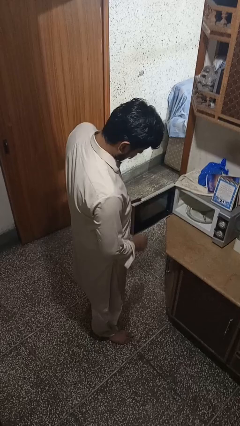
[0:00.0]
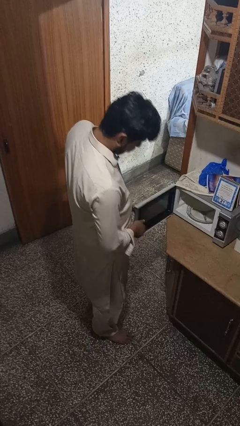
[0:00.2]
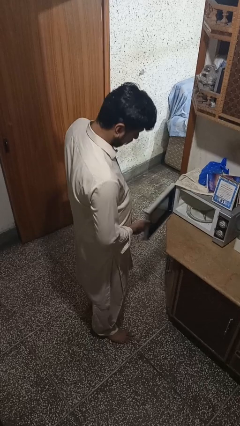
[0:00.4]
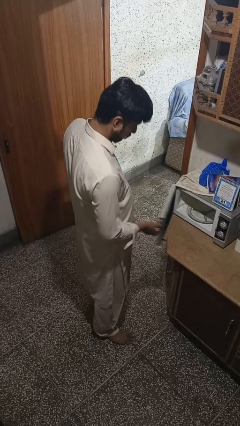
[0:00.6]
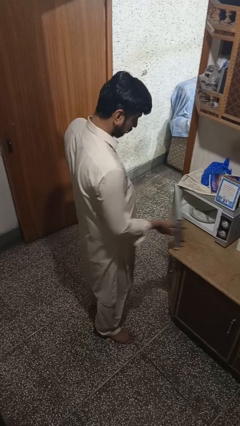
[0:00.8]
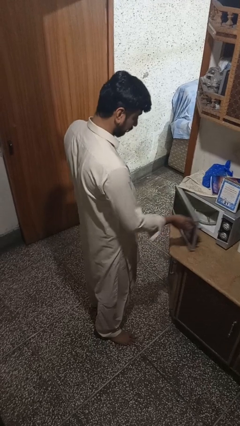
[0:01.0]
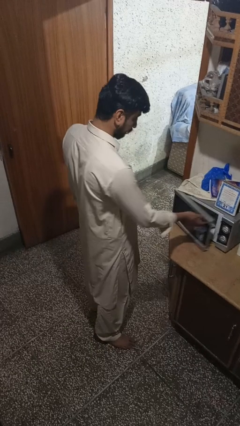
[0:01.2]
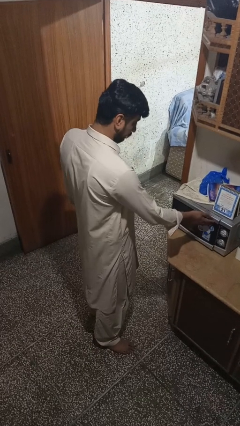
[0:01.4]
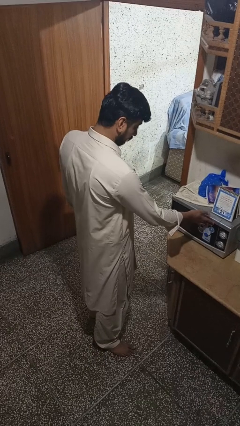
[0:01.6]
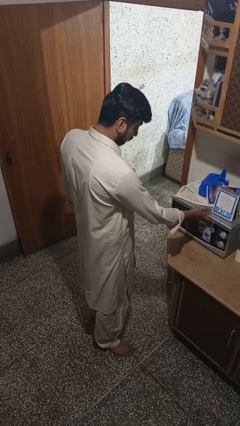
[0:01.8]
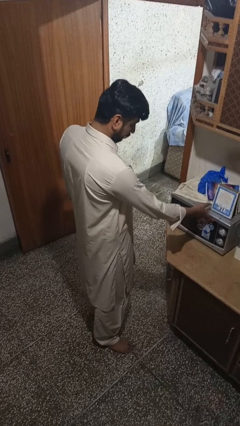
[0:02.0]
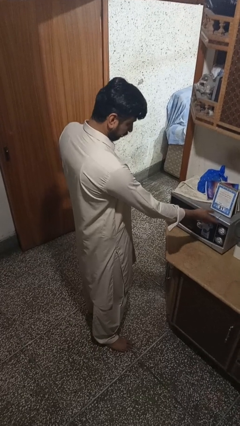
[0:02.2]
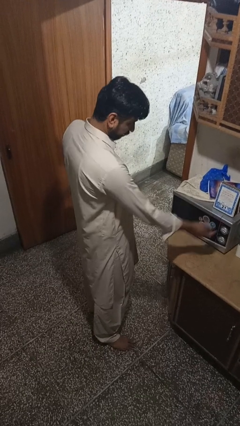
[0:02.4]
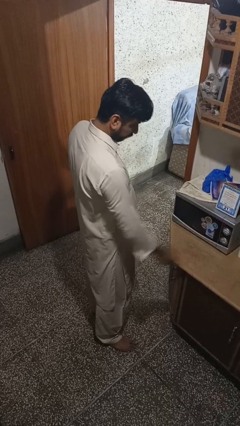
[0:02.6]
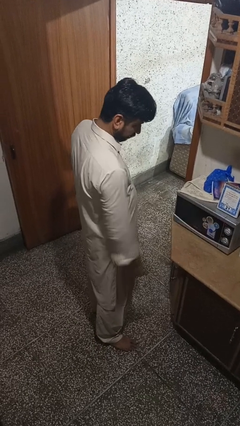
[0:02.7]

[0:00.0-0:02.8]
person closes oven door

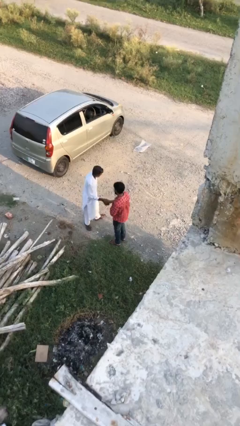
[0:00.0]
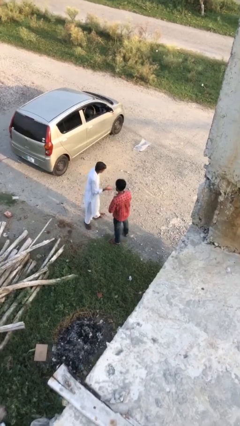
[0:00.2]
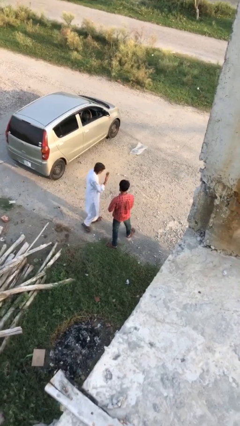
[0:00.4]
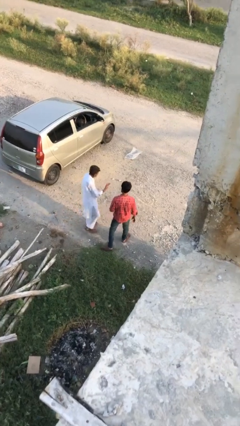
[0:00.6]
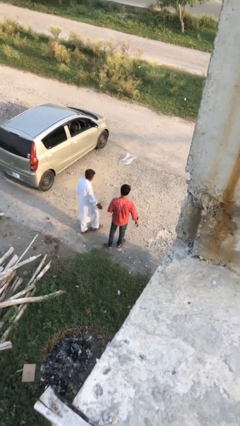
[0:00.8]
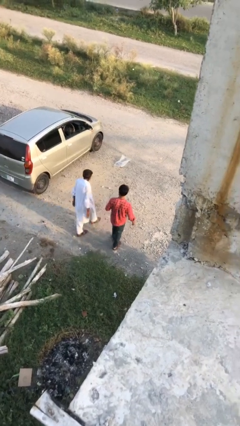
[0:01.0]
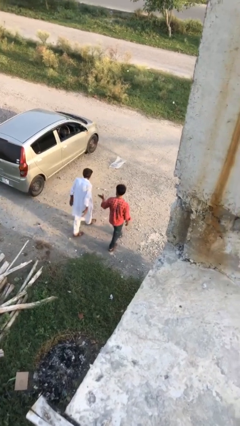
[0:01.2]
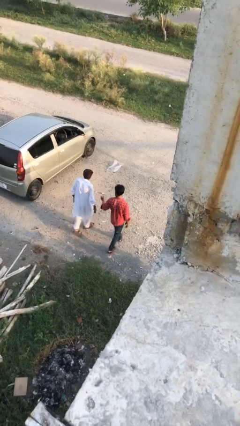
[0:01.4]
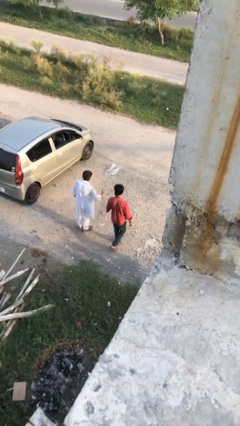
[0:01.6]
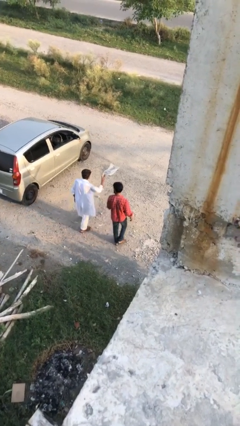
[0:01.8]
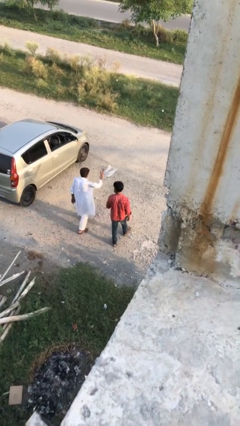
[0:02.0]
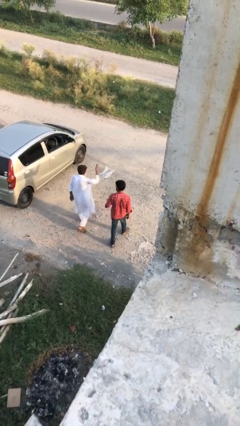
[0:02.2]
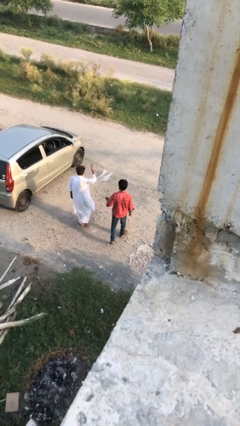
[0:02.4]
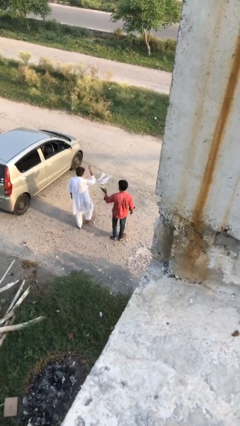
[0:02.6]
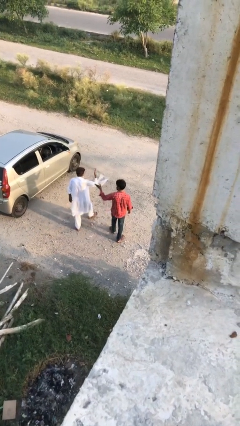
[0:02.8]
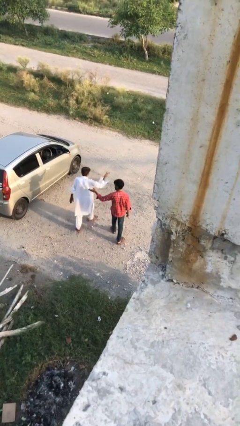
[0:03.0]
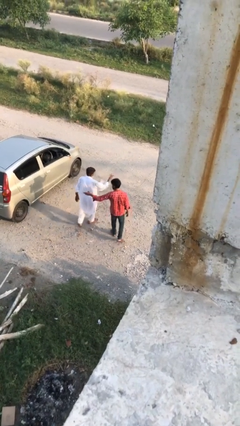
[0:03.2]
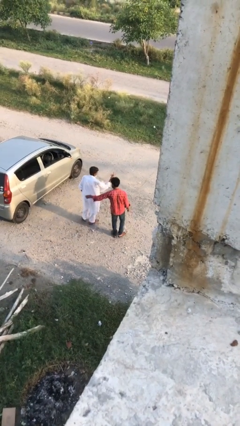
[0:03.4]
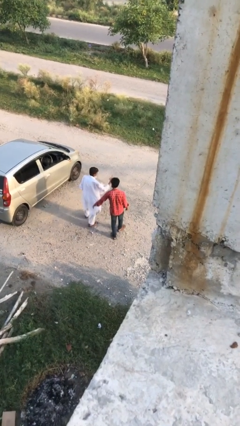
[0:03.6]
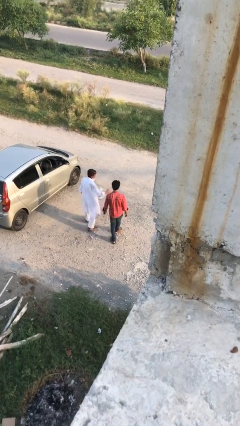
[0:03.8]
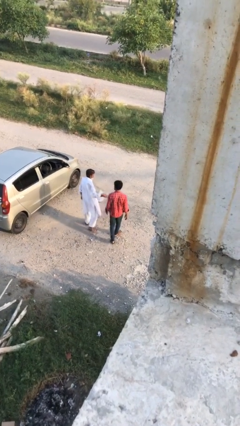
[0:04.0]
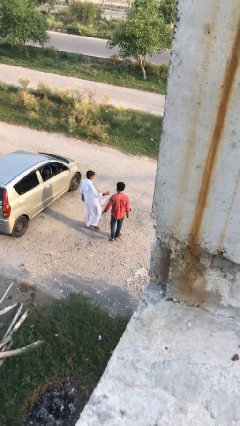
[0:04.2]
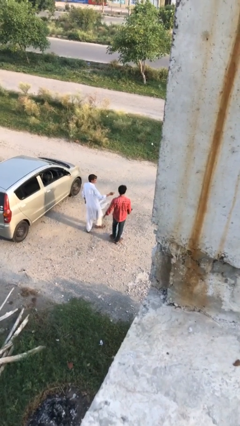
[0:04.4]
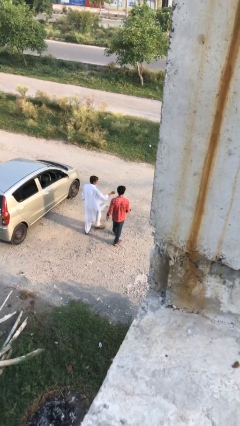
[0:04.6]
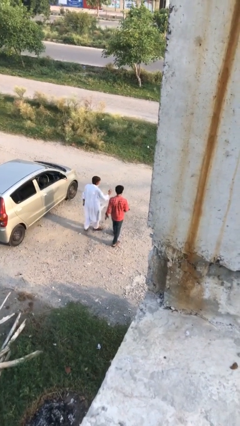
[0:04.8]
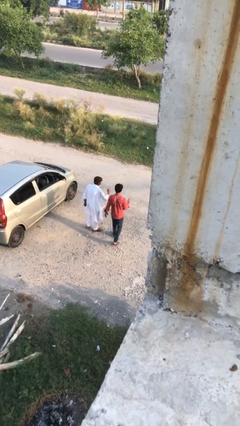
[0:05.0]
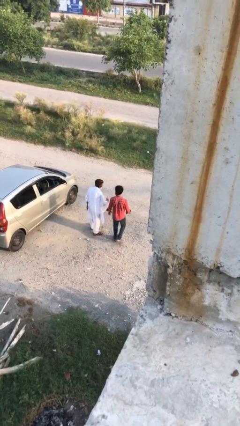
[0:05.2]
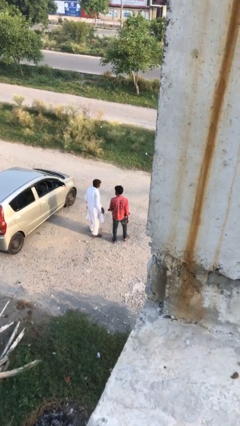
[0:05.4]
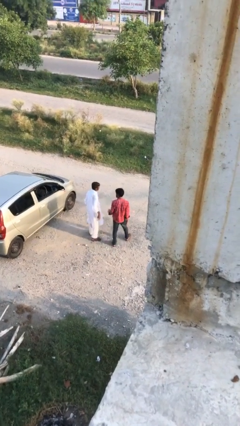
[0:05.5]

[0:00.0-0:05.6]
person talks to person

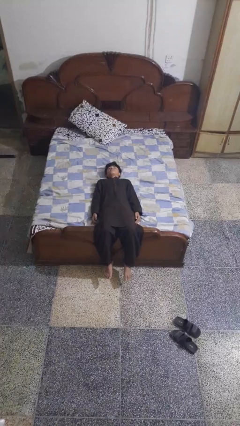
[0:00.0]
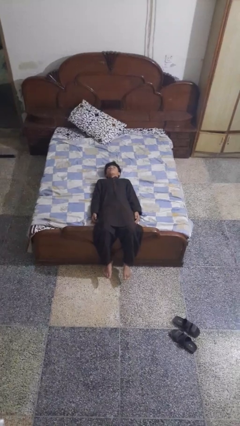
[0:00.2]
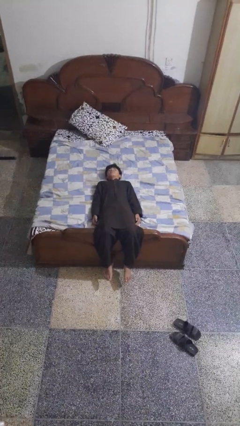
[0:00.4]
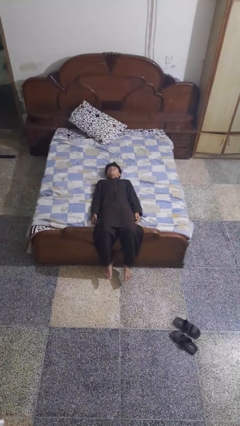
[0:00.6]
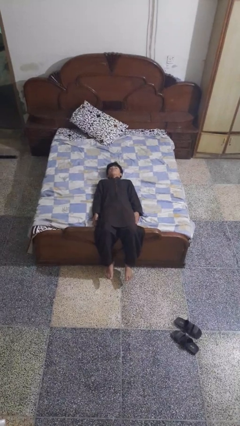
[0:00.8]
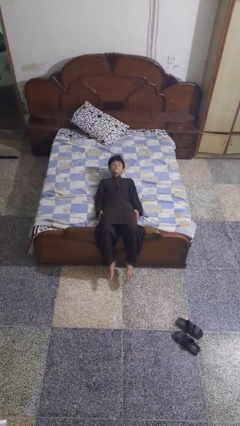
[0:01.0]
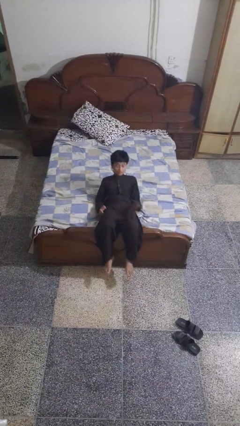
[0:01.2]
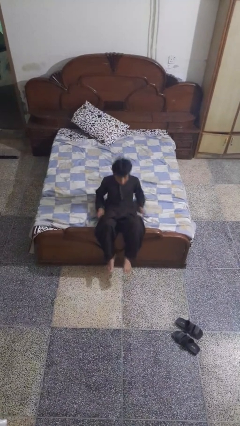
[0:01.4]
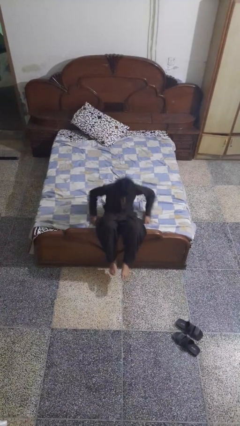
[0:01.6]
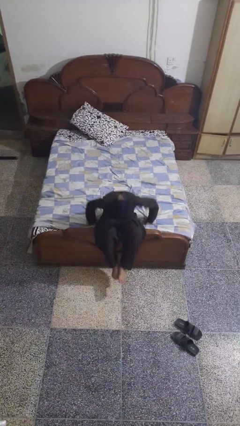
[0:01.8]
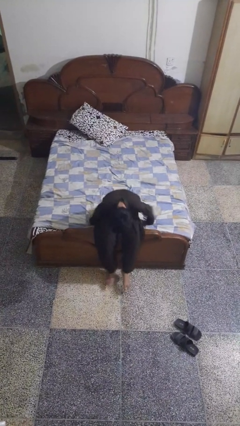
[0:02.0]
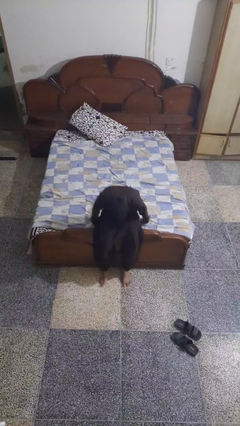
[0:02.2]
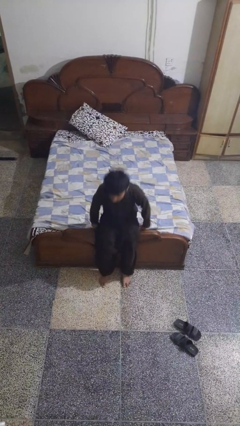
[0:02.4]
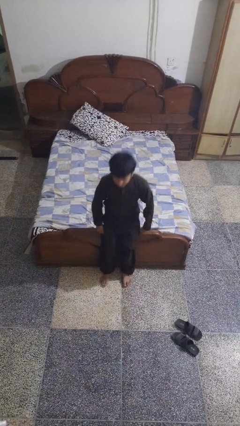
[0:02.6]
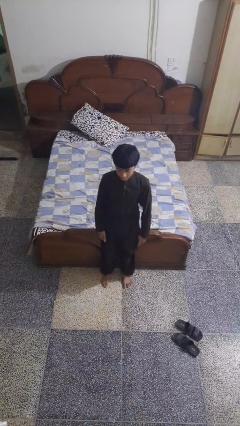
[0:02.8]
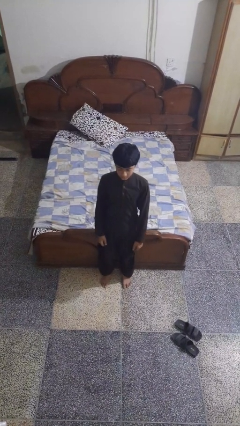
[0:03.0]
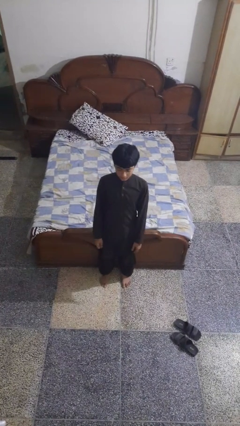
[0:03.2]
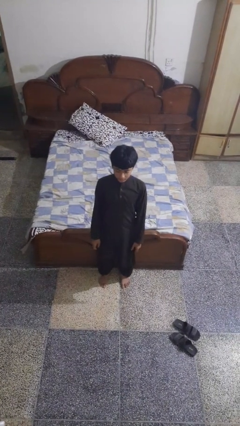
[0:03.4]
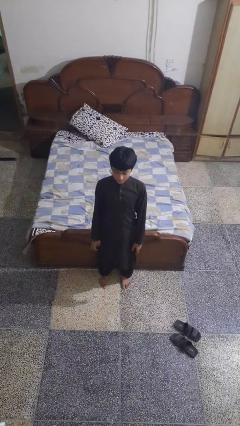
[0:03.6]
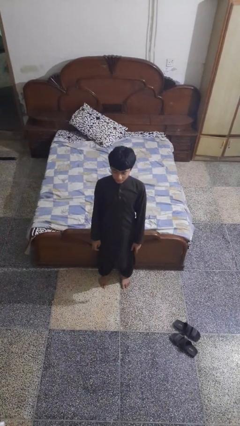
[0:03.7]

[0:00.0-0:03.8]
person stands up

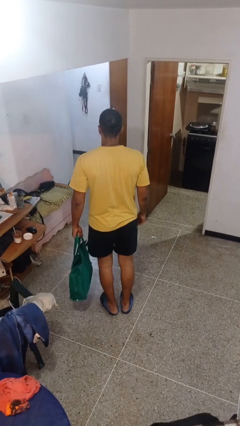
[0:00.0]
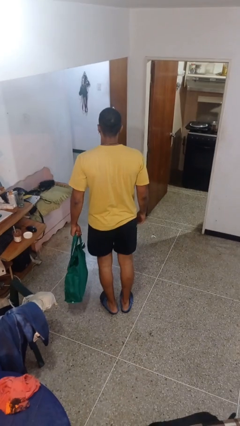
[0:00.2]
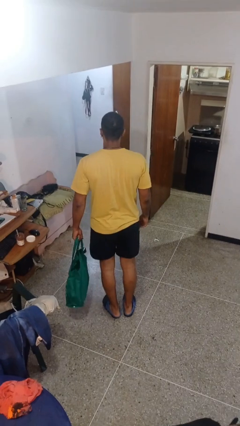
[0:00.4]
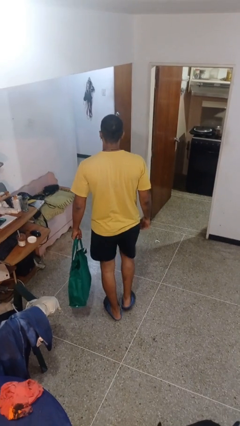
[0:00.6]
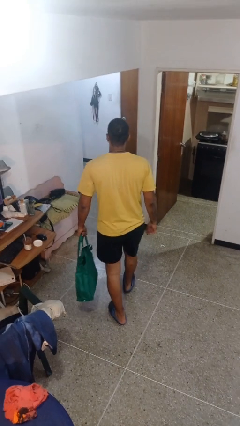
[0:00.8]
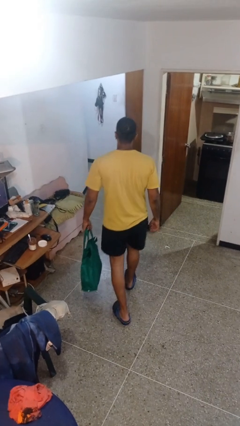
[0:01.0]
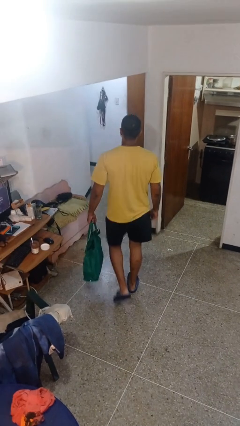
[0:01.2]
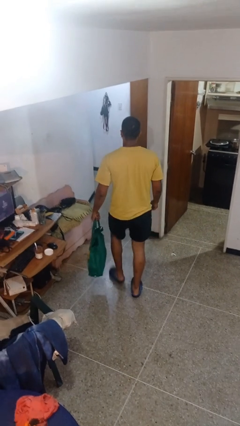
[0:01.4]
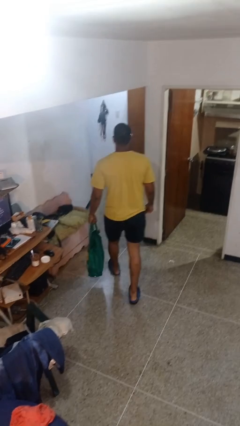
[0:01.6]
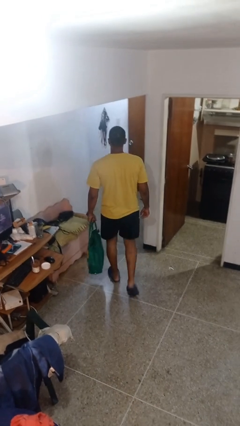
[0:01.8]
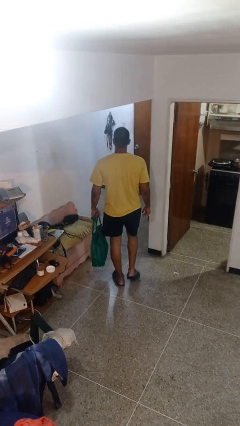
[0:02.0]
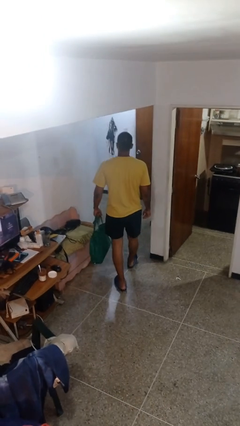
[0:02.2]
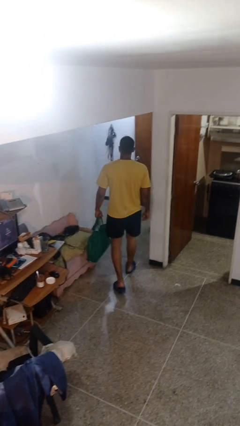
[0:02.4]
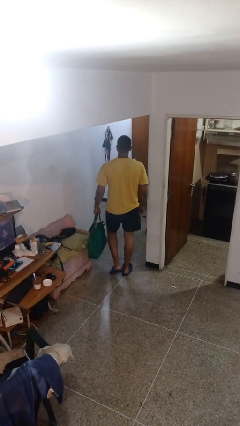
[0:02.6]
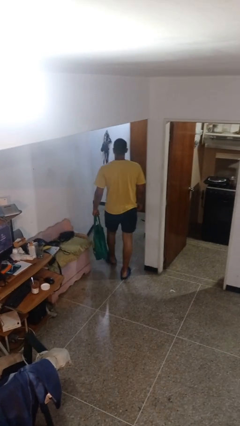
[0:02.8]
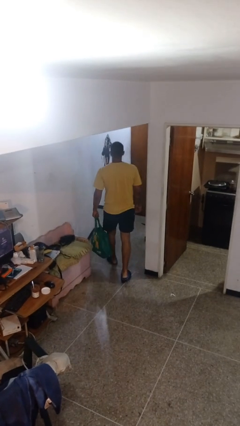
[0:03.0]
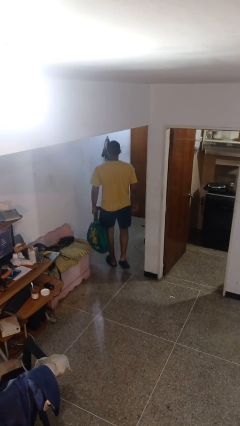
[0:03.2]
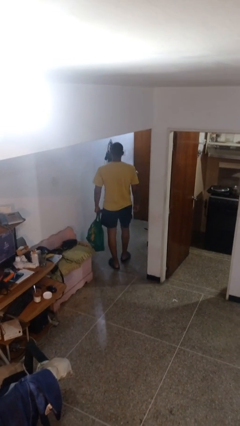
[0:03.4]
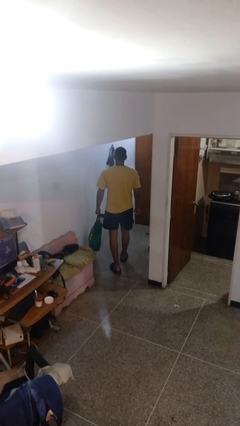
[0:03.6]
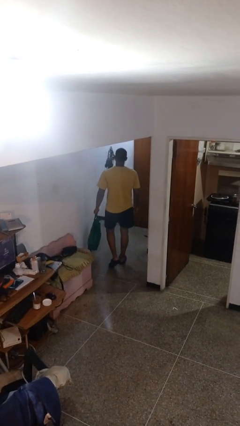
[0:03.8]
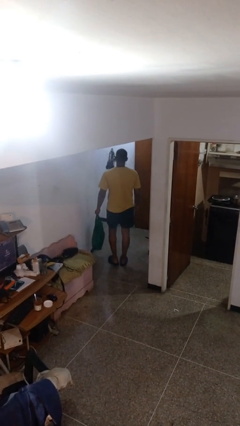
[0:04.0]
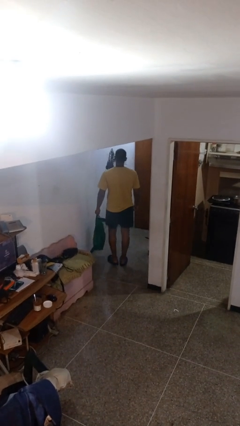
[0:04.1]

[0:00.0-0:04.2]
person carries groceries

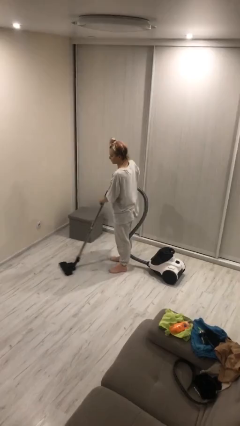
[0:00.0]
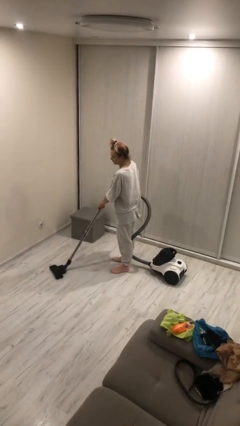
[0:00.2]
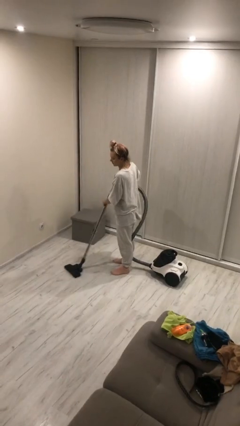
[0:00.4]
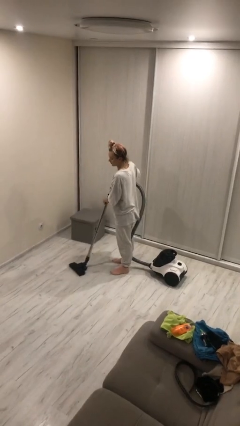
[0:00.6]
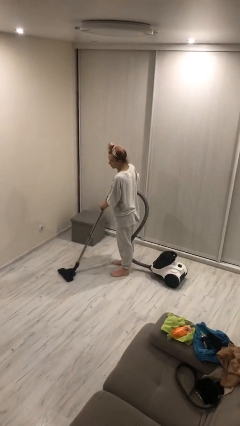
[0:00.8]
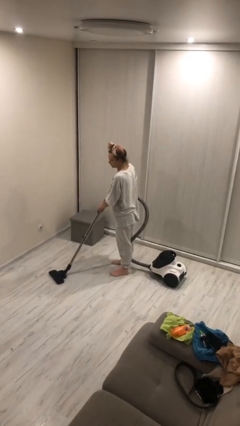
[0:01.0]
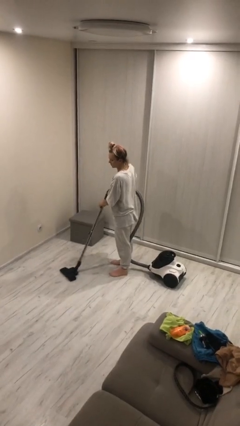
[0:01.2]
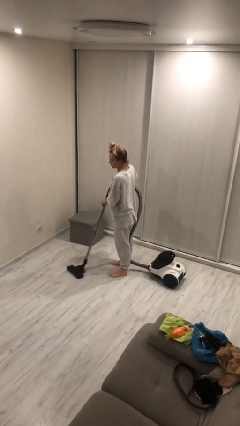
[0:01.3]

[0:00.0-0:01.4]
person vacuums carpet
